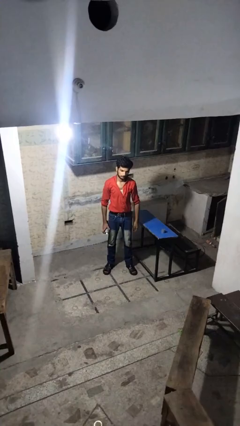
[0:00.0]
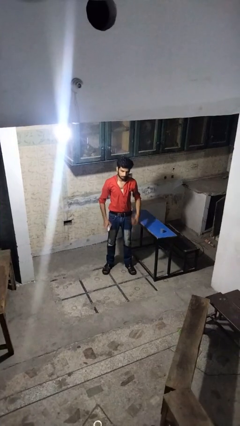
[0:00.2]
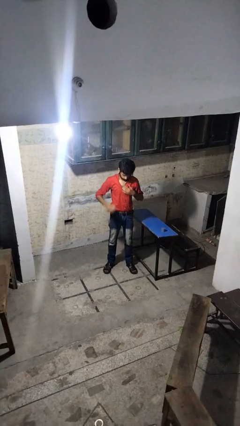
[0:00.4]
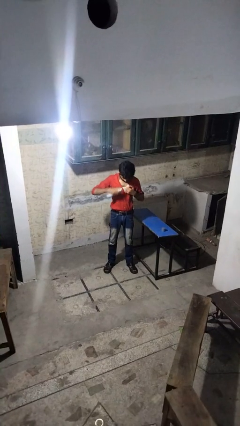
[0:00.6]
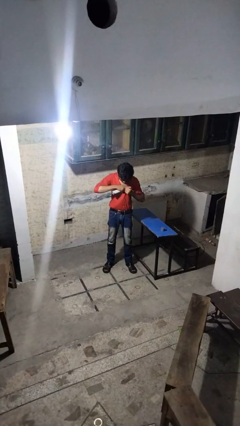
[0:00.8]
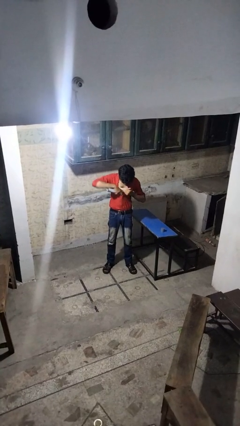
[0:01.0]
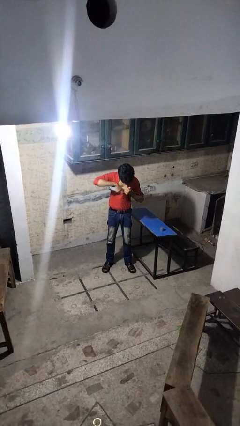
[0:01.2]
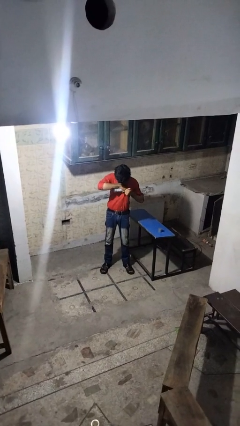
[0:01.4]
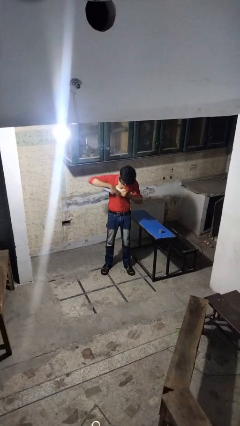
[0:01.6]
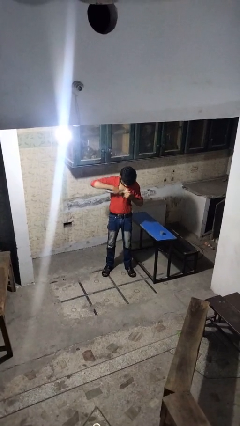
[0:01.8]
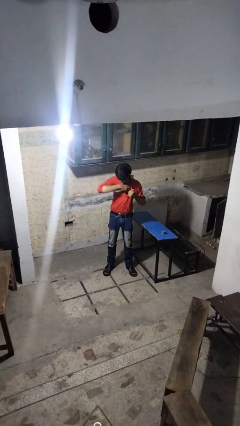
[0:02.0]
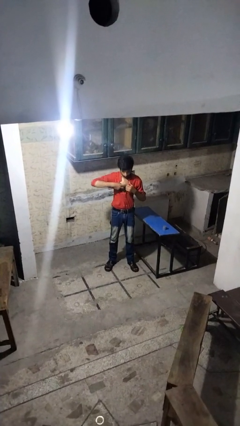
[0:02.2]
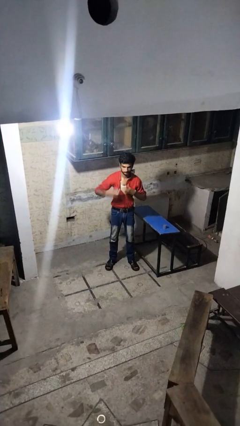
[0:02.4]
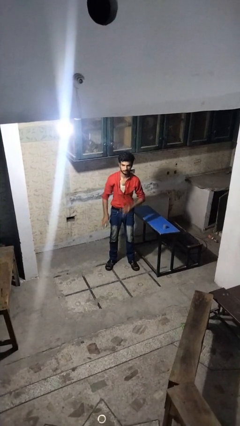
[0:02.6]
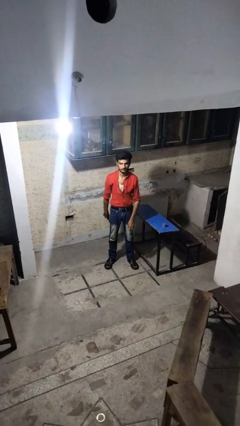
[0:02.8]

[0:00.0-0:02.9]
person applies deodorant

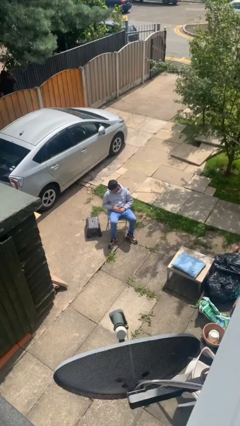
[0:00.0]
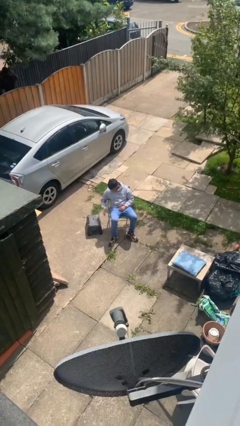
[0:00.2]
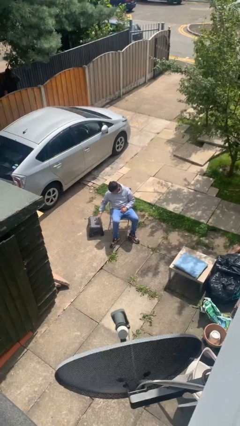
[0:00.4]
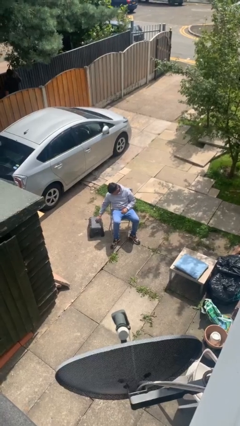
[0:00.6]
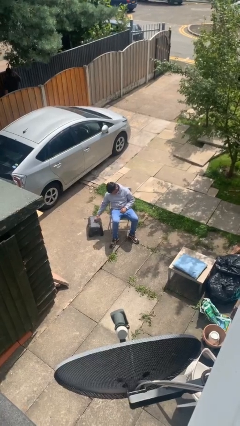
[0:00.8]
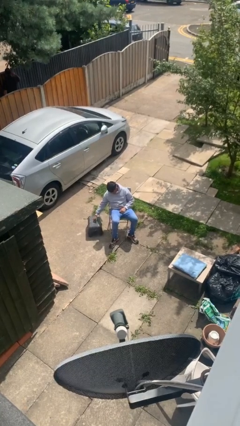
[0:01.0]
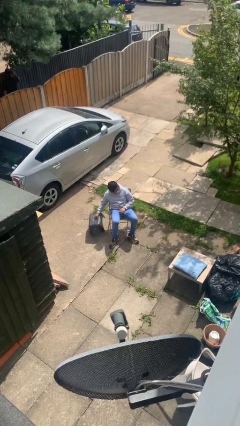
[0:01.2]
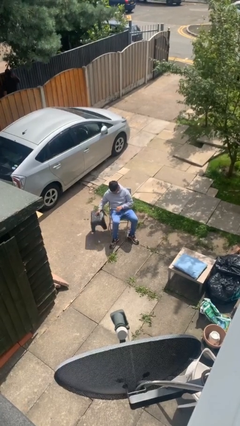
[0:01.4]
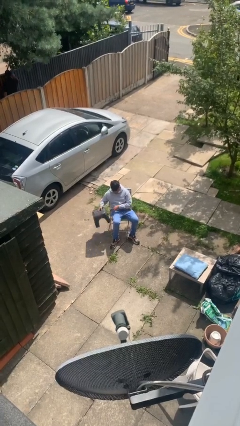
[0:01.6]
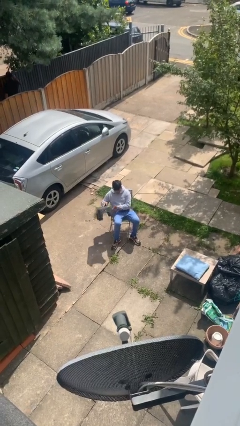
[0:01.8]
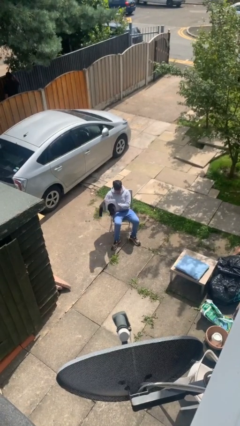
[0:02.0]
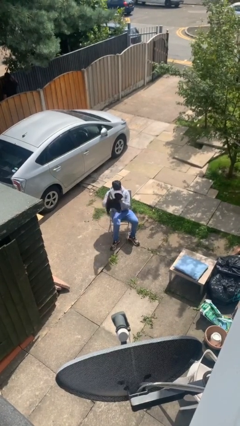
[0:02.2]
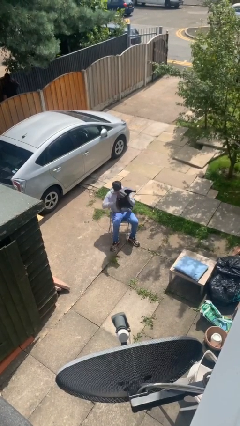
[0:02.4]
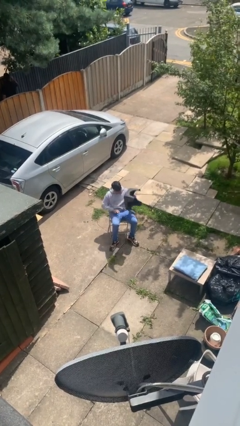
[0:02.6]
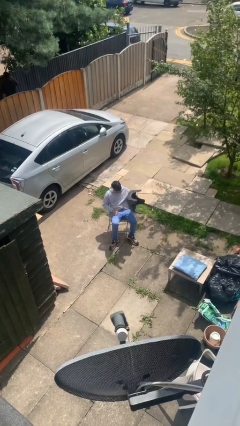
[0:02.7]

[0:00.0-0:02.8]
person picks up object from floor

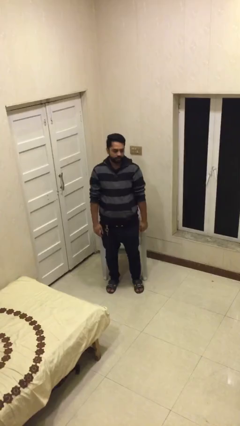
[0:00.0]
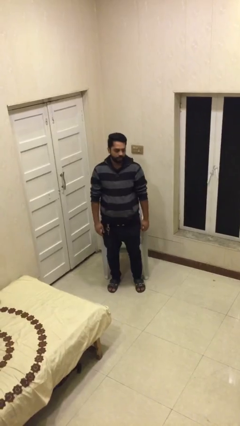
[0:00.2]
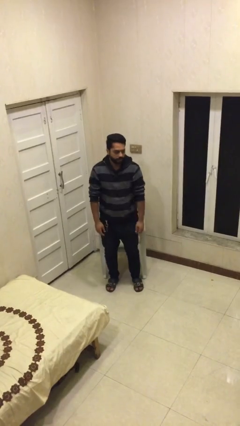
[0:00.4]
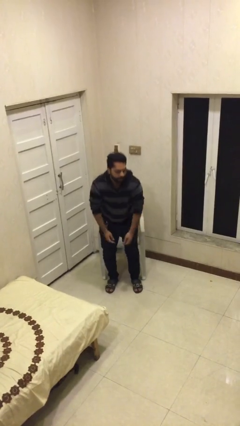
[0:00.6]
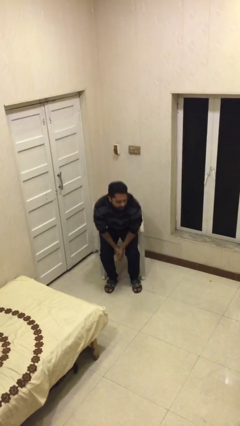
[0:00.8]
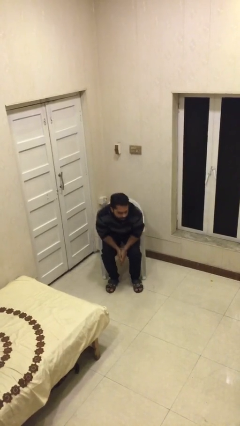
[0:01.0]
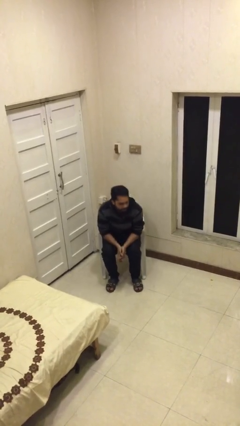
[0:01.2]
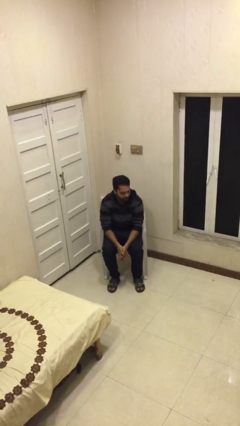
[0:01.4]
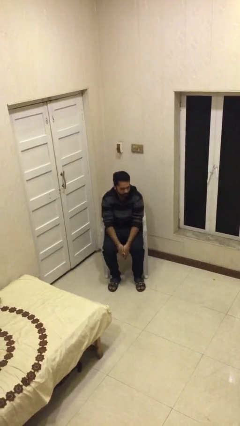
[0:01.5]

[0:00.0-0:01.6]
person sits down

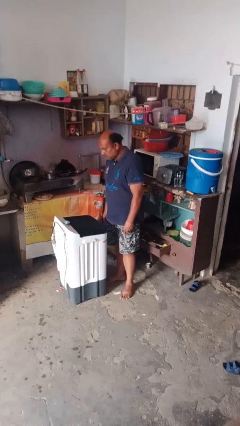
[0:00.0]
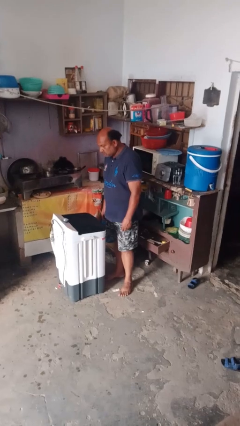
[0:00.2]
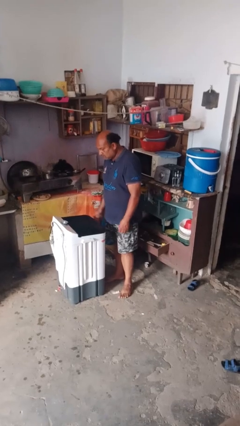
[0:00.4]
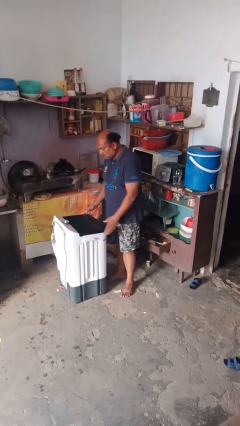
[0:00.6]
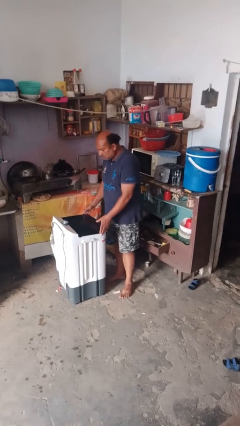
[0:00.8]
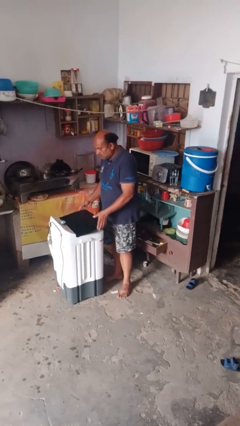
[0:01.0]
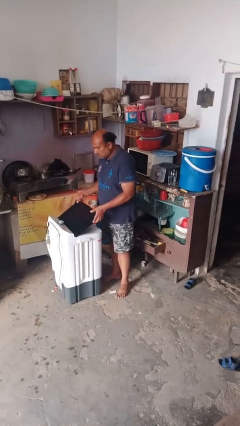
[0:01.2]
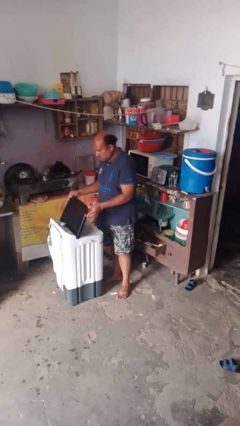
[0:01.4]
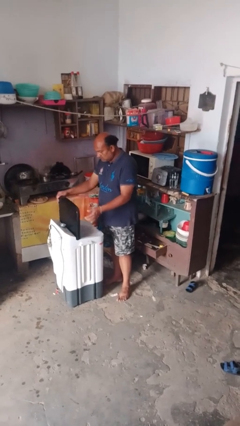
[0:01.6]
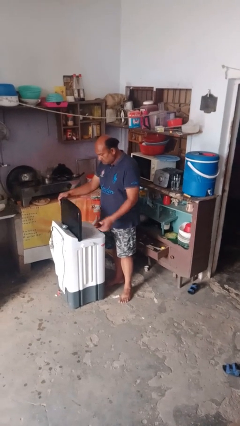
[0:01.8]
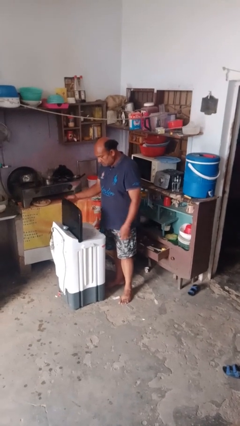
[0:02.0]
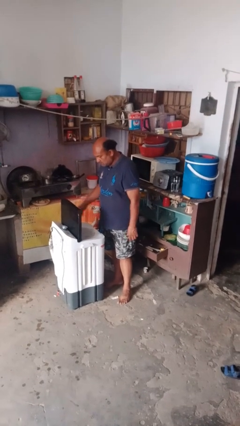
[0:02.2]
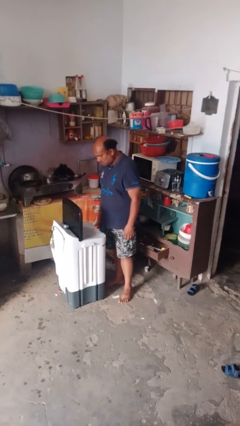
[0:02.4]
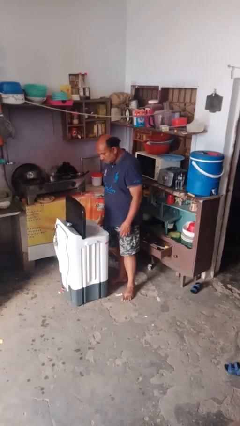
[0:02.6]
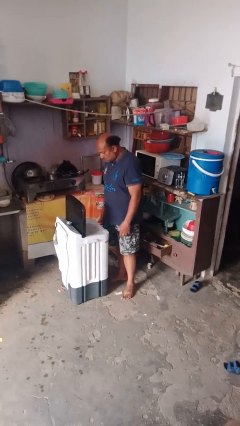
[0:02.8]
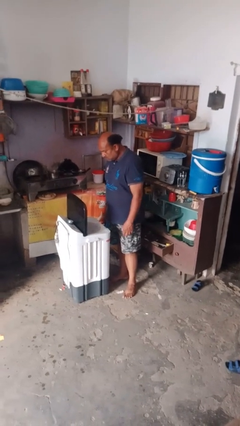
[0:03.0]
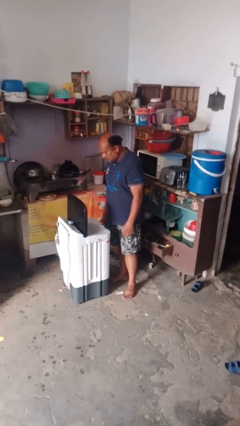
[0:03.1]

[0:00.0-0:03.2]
person opens clothes washer

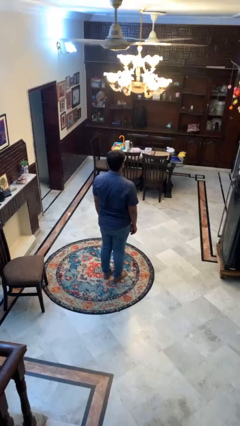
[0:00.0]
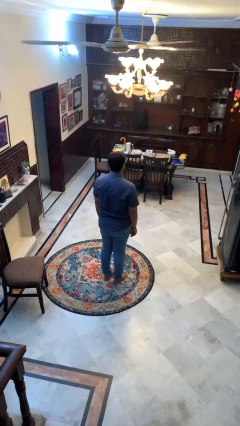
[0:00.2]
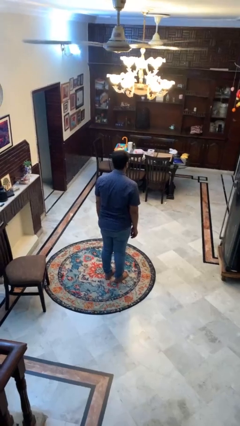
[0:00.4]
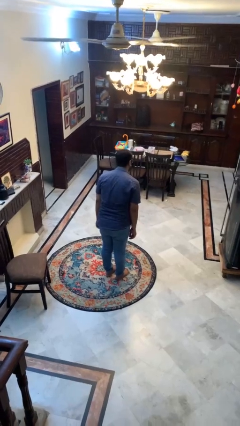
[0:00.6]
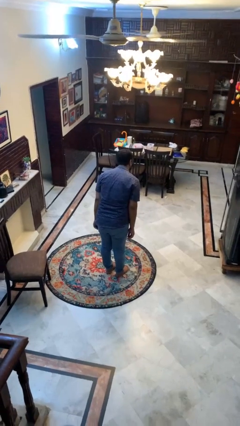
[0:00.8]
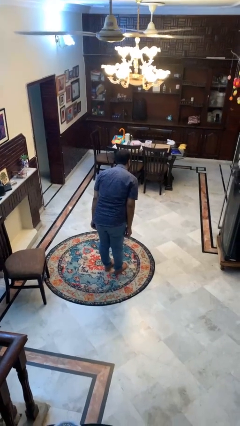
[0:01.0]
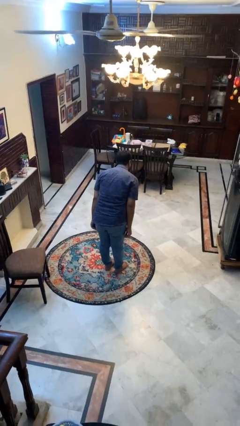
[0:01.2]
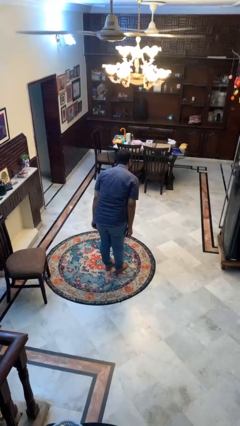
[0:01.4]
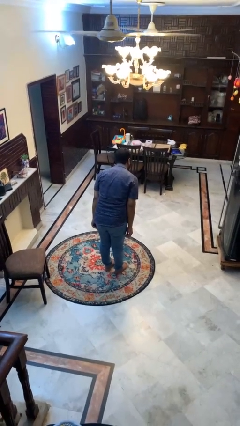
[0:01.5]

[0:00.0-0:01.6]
person bows

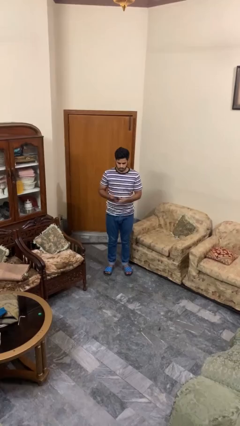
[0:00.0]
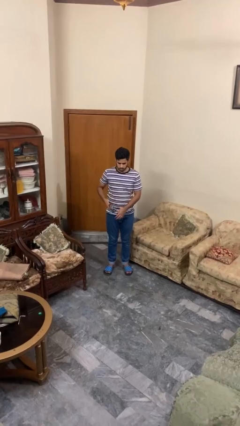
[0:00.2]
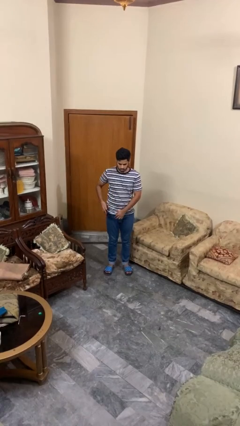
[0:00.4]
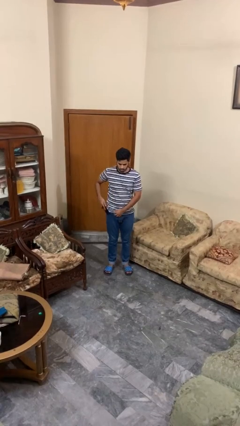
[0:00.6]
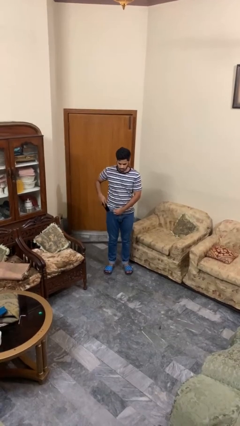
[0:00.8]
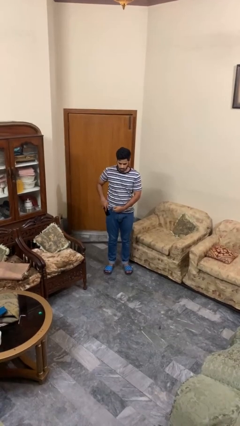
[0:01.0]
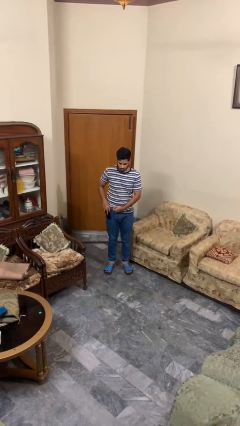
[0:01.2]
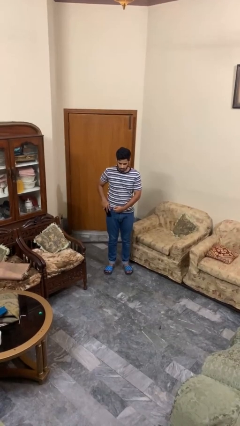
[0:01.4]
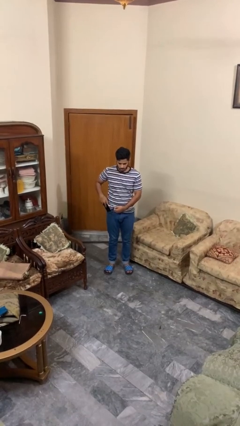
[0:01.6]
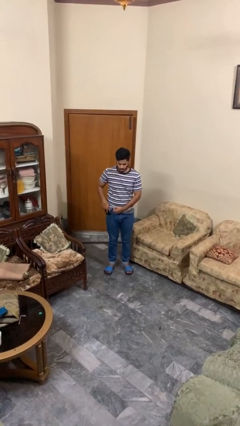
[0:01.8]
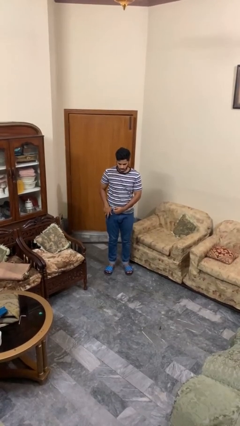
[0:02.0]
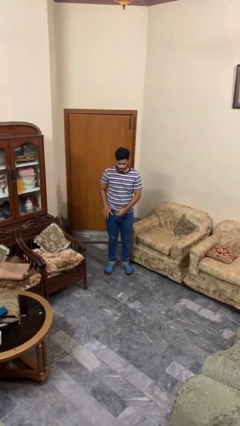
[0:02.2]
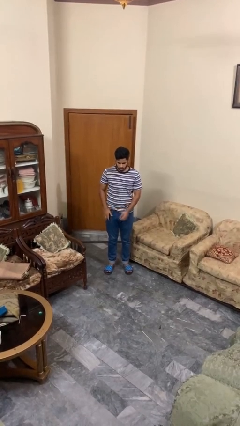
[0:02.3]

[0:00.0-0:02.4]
person puts phone into pocket

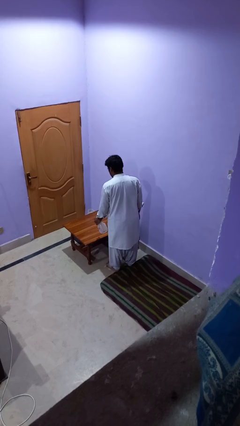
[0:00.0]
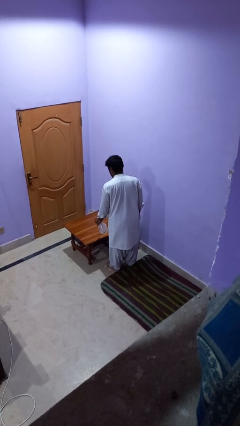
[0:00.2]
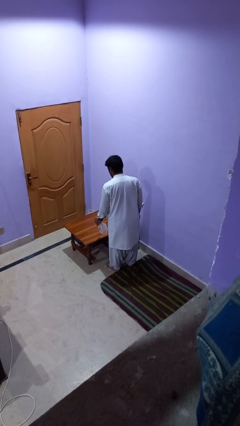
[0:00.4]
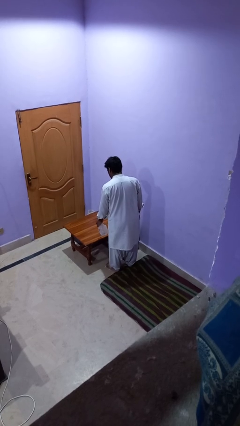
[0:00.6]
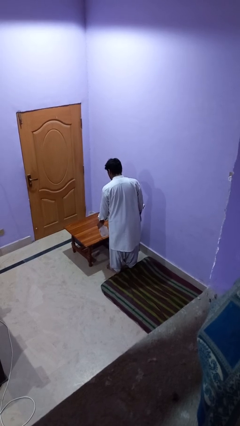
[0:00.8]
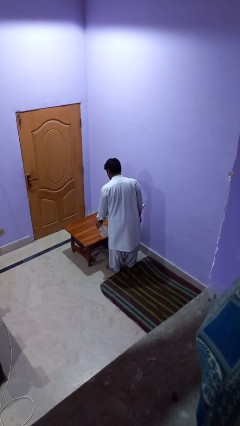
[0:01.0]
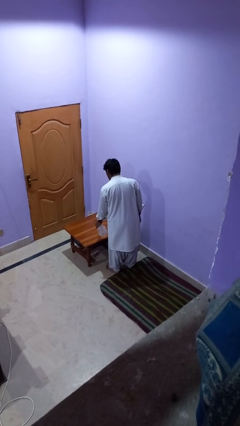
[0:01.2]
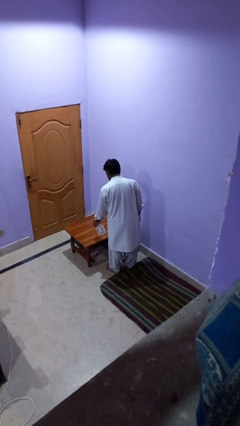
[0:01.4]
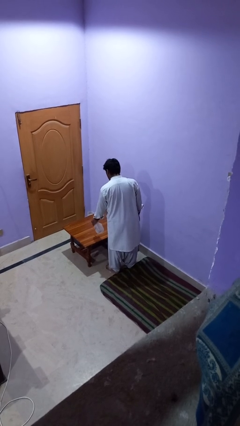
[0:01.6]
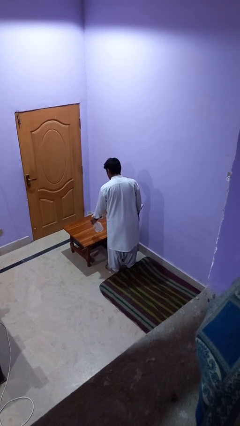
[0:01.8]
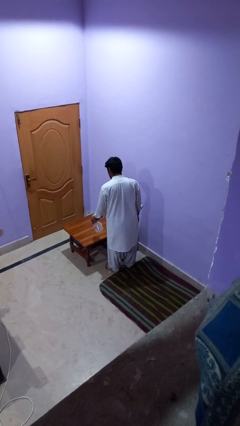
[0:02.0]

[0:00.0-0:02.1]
person sprays from bottle
